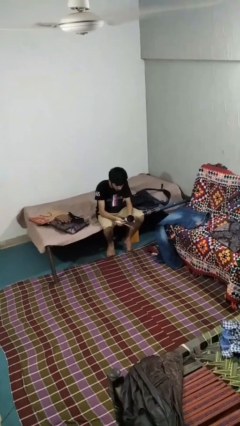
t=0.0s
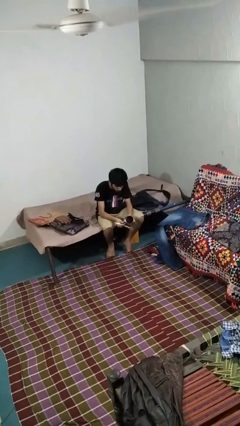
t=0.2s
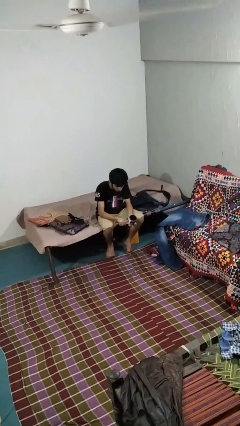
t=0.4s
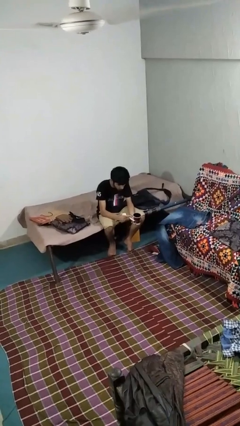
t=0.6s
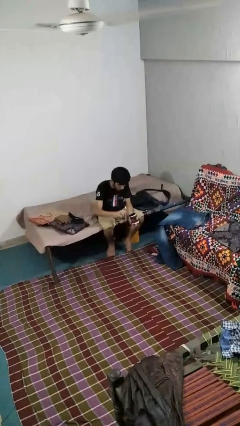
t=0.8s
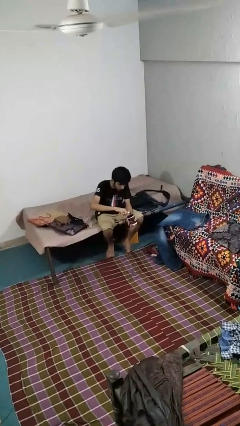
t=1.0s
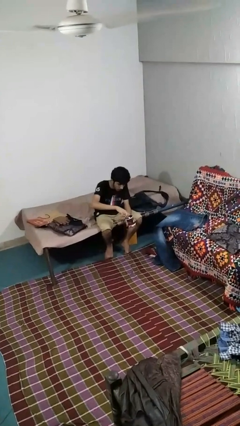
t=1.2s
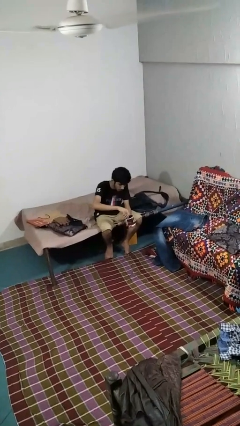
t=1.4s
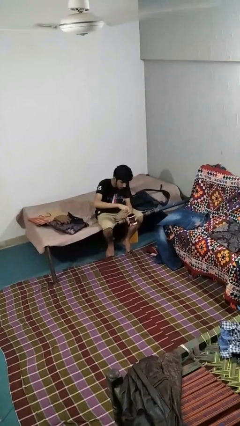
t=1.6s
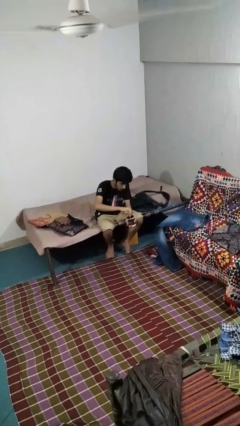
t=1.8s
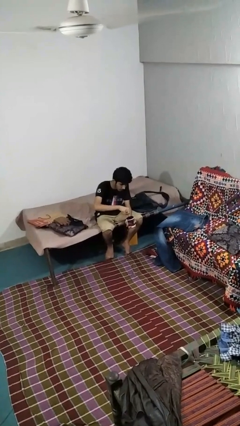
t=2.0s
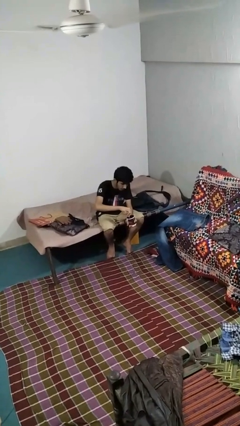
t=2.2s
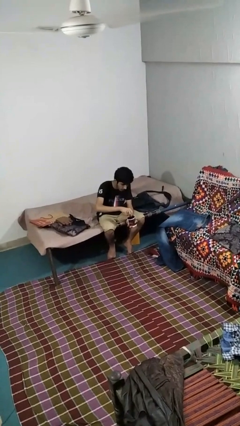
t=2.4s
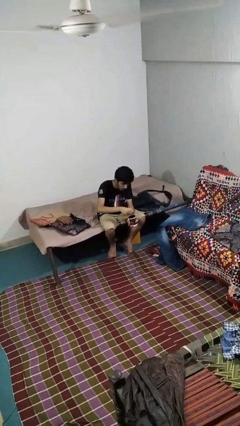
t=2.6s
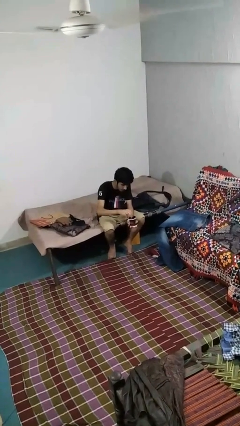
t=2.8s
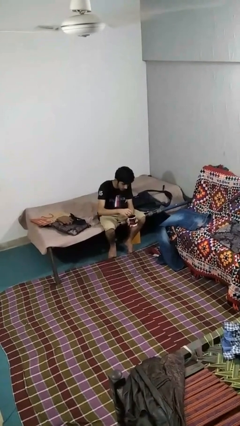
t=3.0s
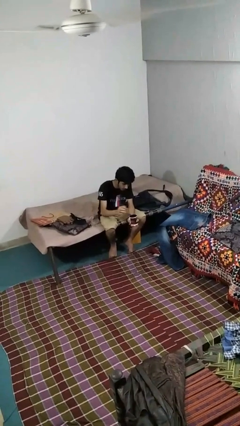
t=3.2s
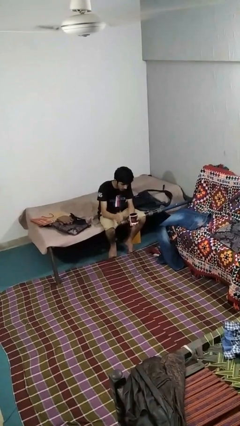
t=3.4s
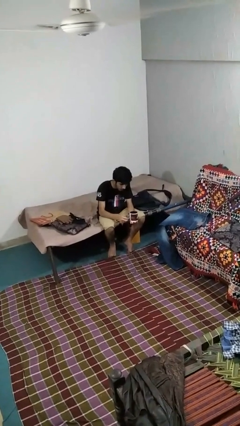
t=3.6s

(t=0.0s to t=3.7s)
person stirs mug

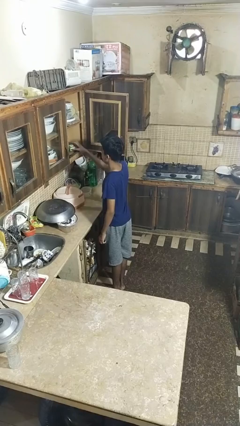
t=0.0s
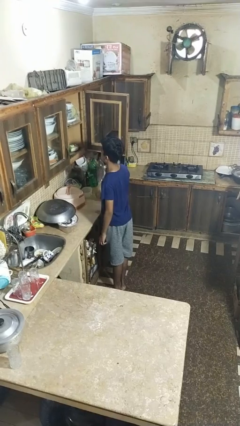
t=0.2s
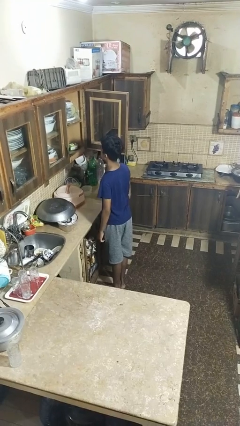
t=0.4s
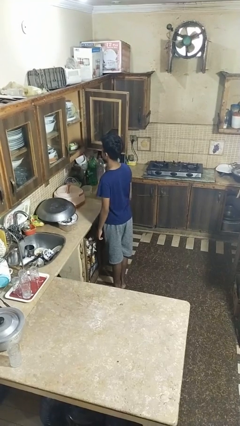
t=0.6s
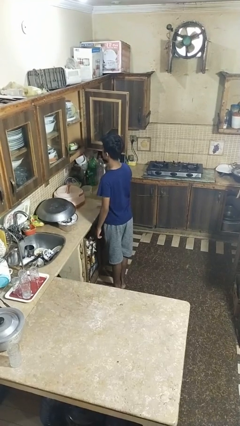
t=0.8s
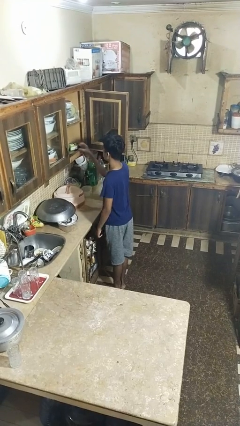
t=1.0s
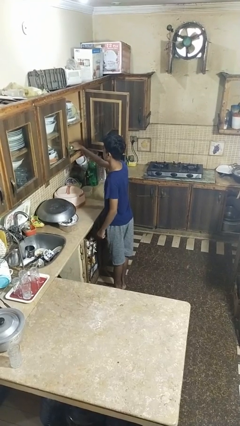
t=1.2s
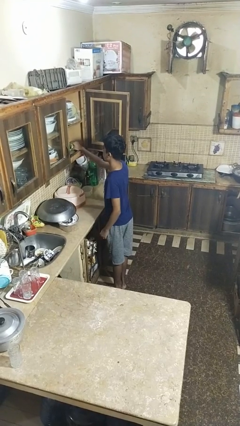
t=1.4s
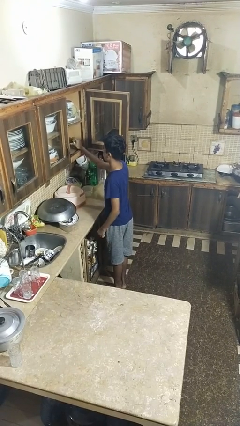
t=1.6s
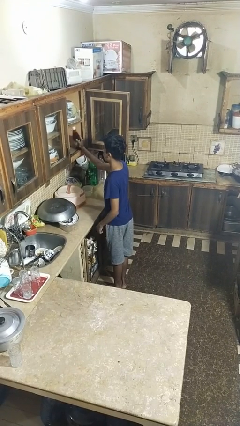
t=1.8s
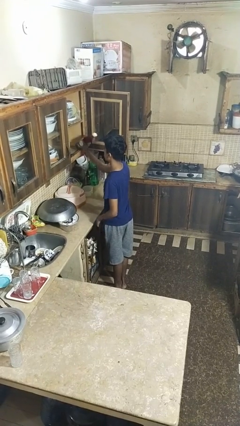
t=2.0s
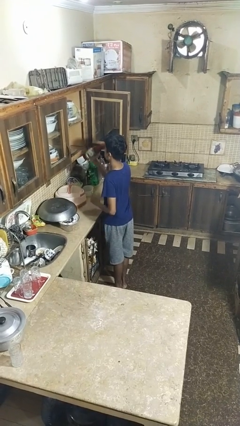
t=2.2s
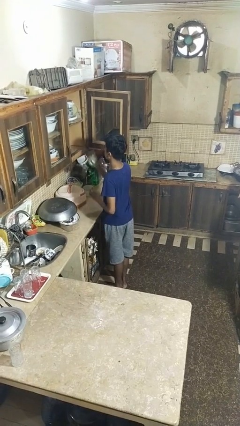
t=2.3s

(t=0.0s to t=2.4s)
person takes object from cabinet

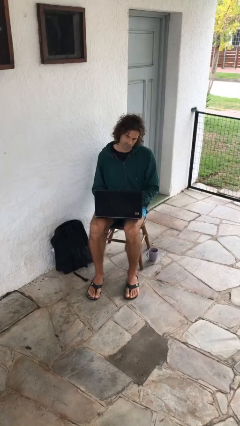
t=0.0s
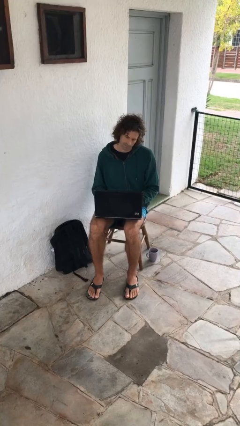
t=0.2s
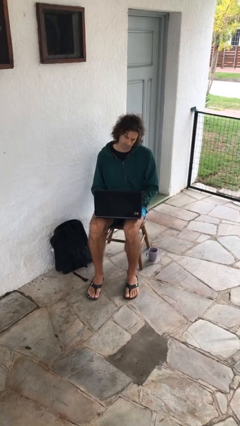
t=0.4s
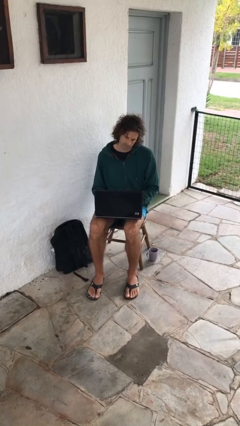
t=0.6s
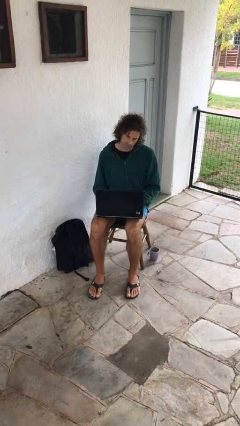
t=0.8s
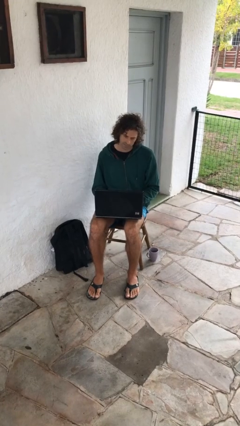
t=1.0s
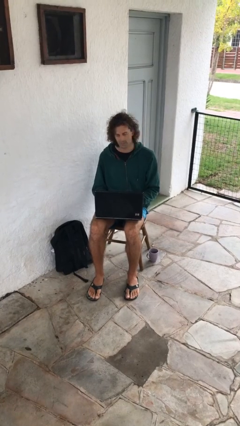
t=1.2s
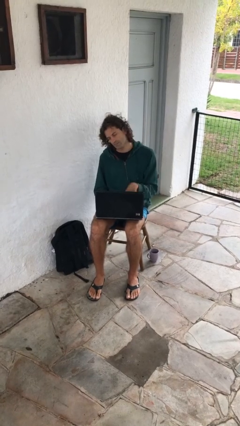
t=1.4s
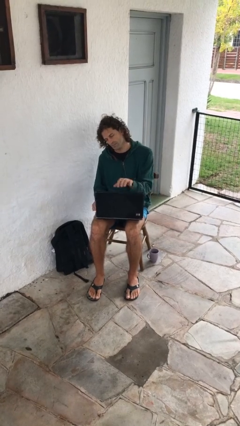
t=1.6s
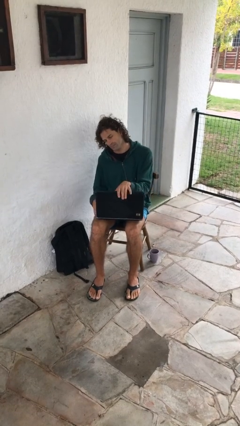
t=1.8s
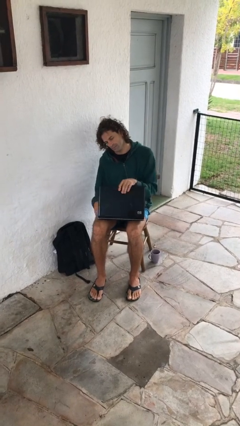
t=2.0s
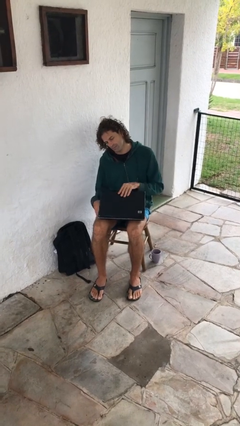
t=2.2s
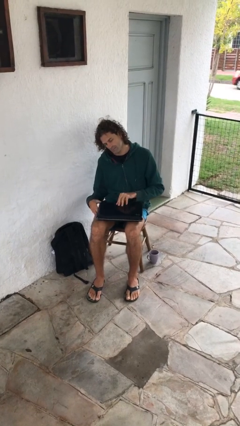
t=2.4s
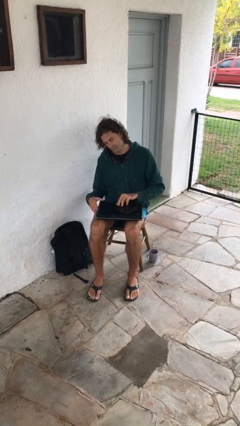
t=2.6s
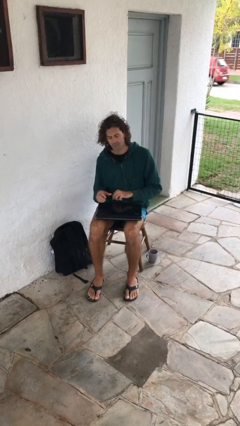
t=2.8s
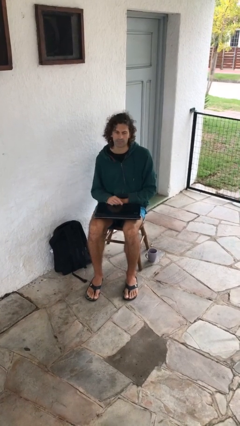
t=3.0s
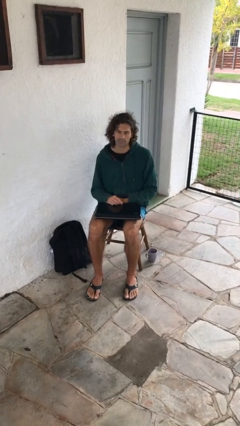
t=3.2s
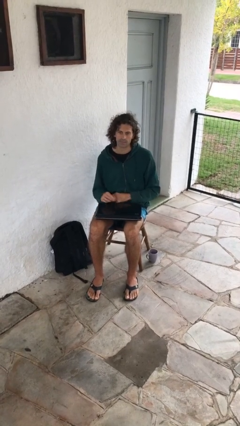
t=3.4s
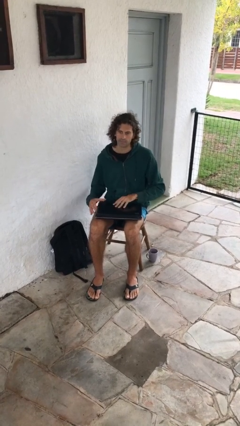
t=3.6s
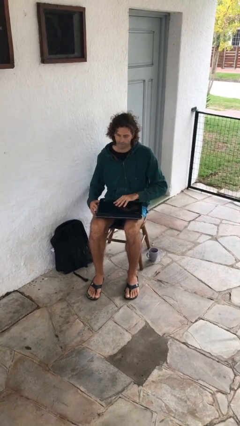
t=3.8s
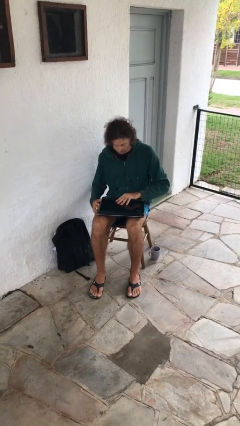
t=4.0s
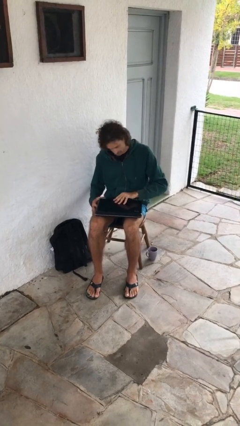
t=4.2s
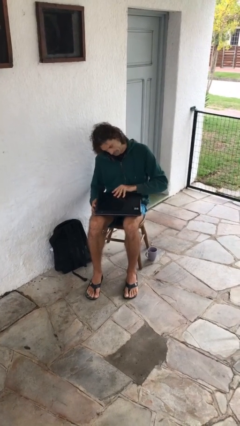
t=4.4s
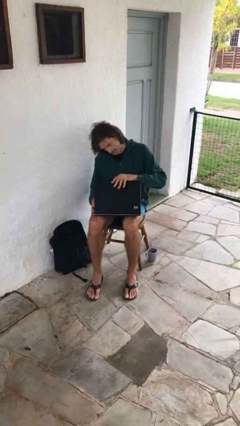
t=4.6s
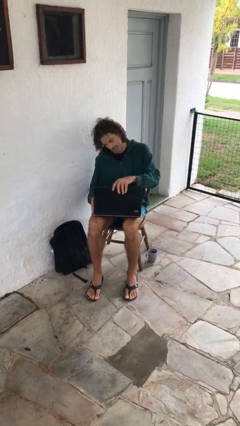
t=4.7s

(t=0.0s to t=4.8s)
person interacts with laptop

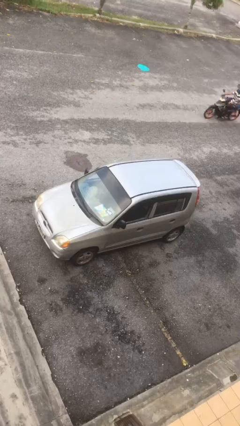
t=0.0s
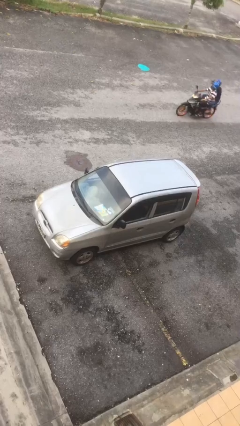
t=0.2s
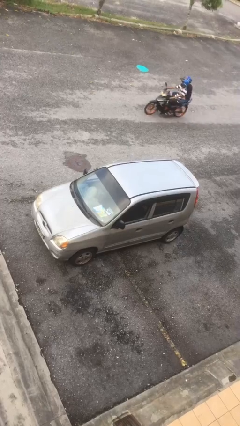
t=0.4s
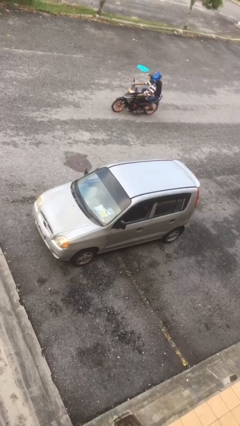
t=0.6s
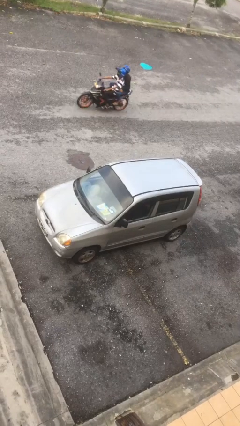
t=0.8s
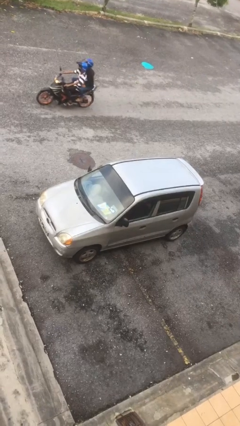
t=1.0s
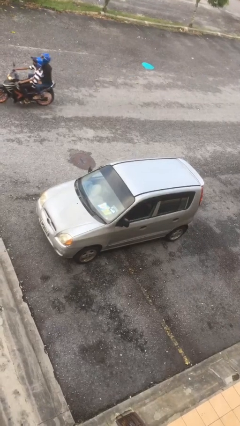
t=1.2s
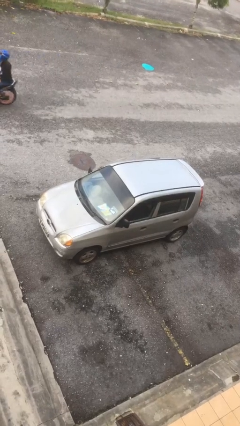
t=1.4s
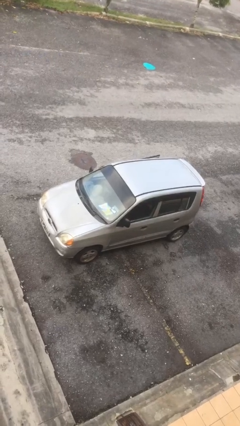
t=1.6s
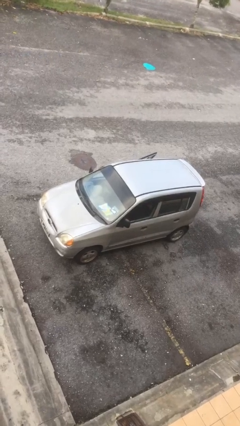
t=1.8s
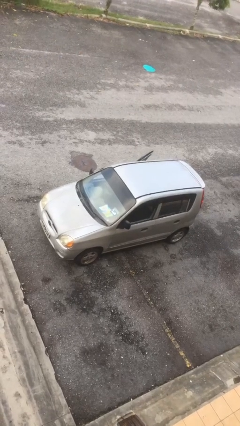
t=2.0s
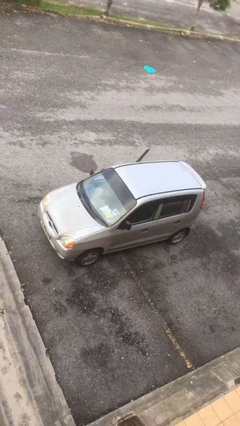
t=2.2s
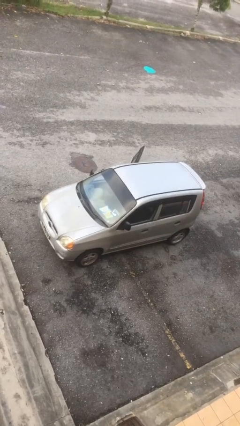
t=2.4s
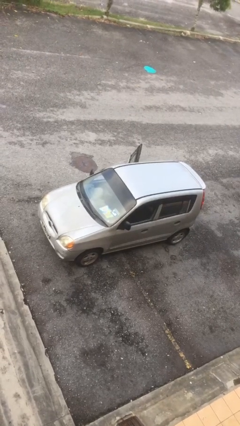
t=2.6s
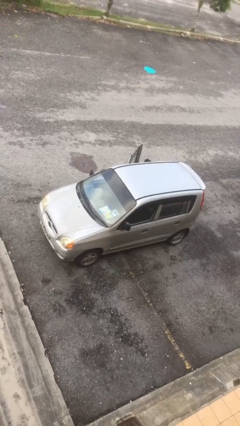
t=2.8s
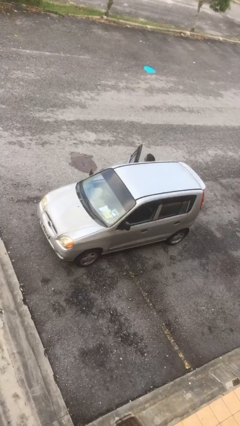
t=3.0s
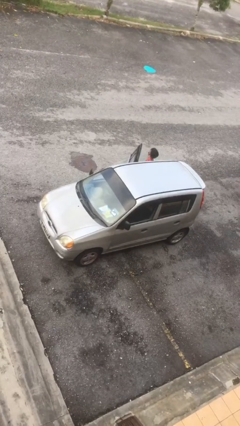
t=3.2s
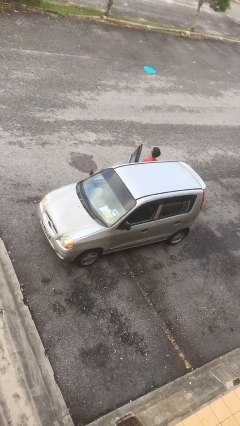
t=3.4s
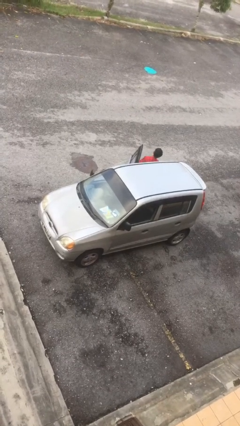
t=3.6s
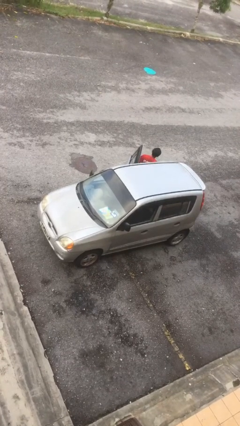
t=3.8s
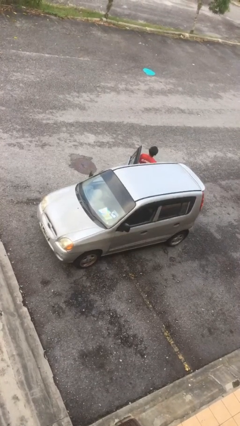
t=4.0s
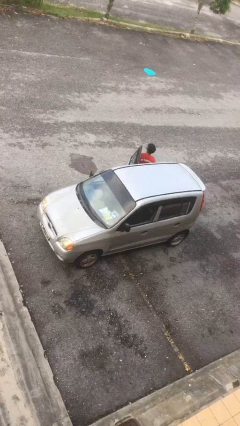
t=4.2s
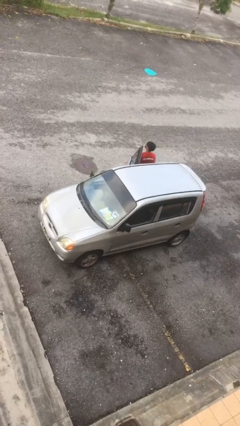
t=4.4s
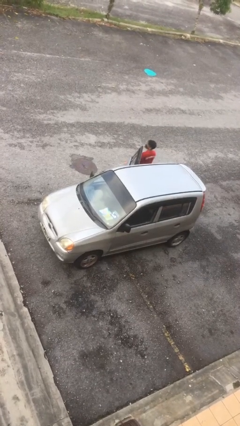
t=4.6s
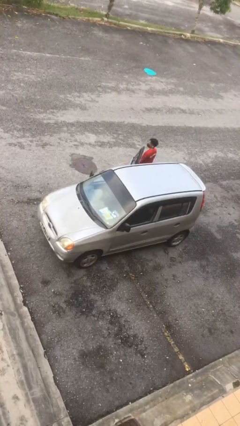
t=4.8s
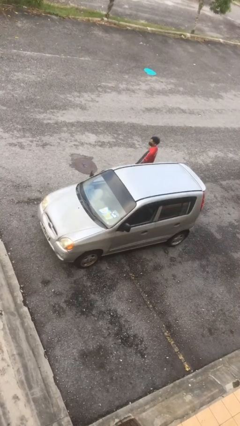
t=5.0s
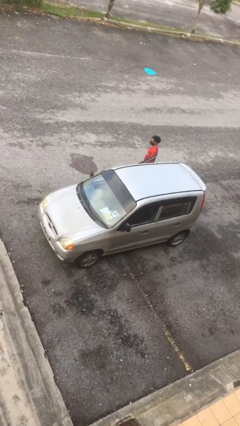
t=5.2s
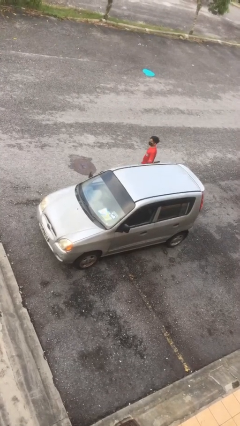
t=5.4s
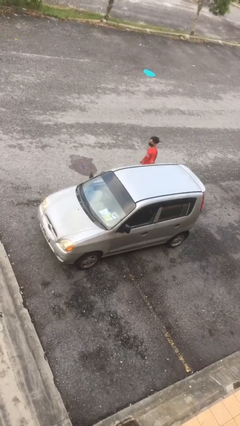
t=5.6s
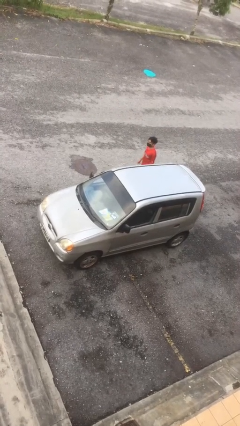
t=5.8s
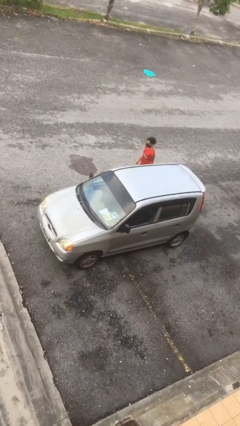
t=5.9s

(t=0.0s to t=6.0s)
car drops off person

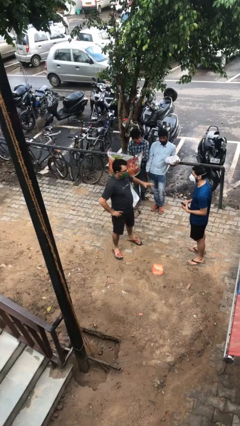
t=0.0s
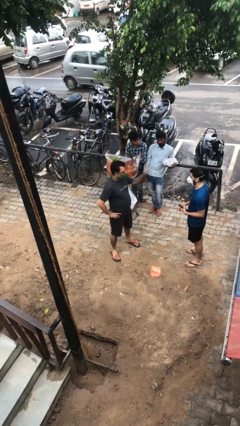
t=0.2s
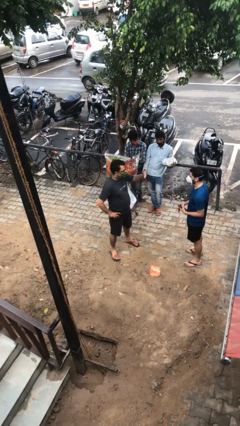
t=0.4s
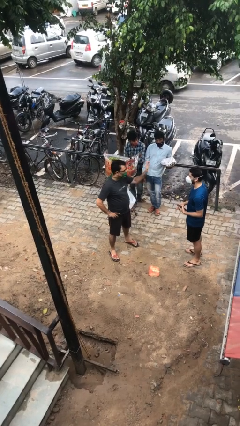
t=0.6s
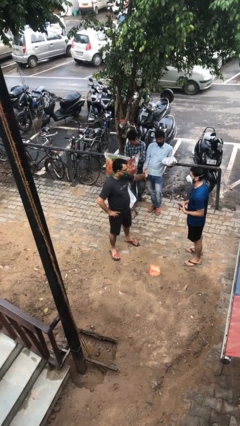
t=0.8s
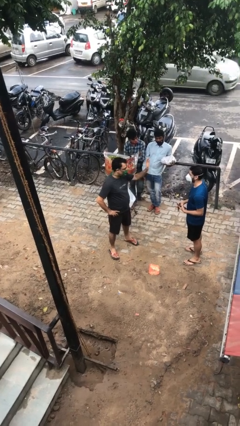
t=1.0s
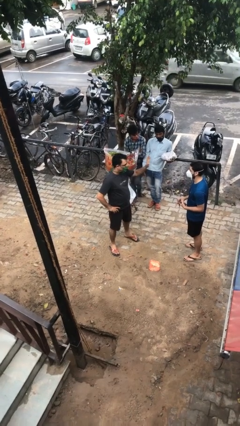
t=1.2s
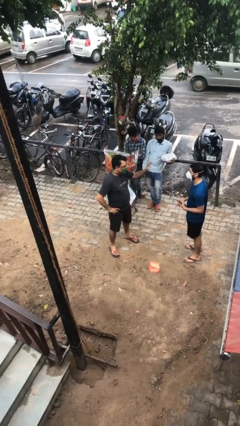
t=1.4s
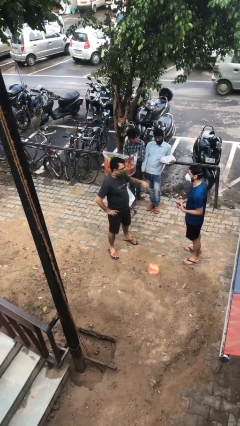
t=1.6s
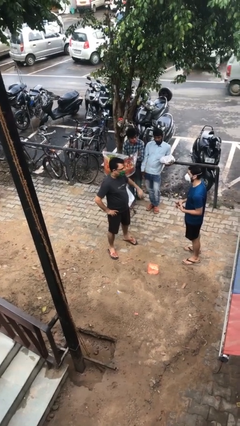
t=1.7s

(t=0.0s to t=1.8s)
person waves at person
